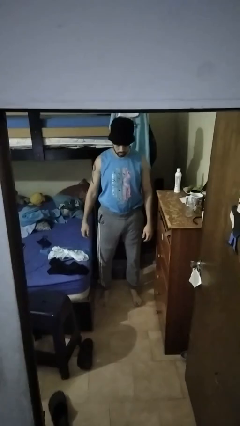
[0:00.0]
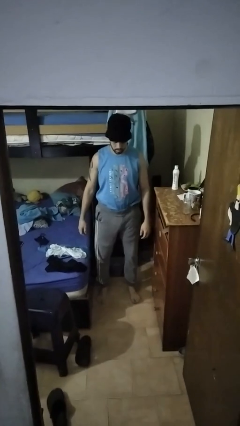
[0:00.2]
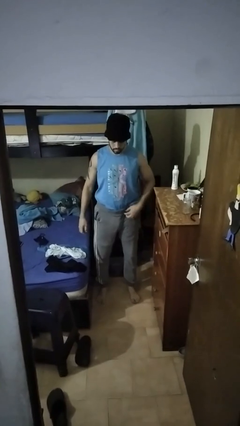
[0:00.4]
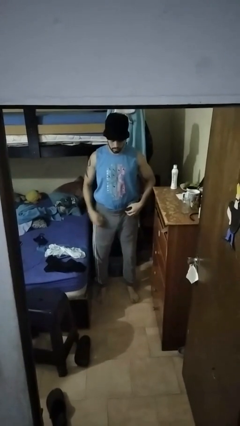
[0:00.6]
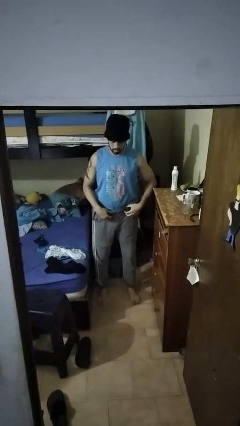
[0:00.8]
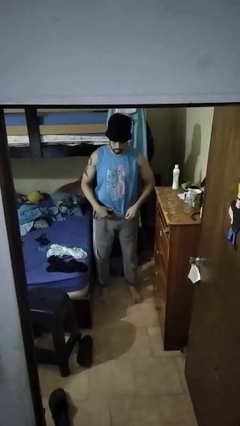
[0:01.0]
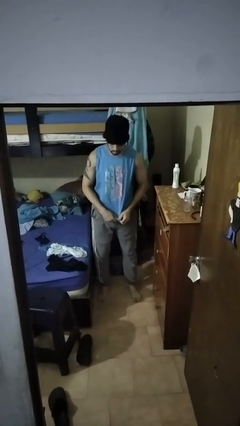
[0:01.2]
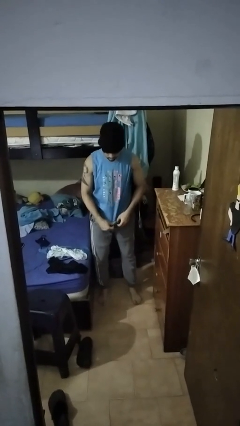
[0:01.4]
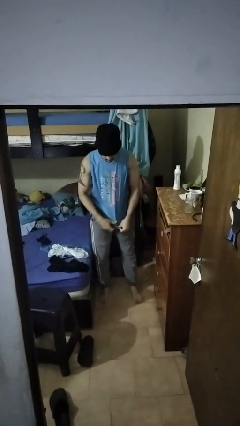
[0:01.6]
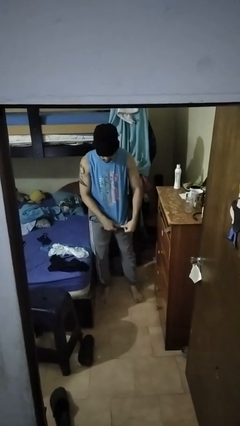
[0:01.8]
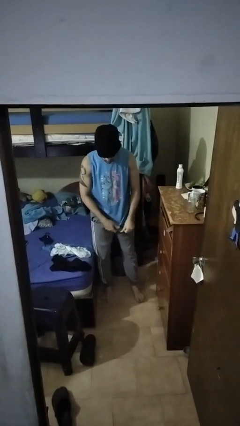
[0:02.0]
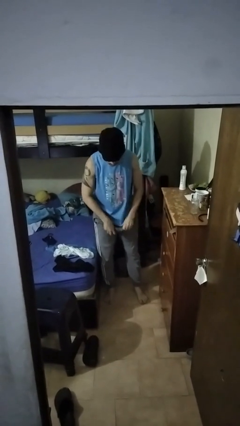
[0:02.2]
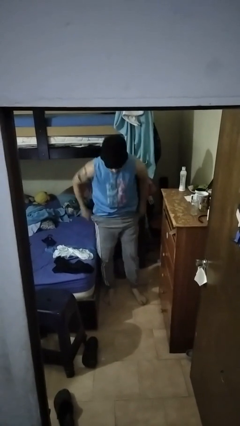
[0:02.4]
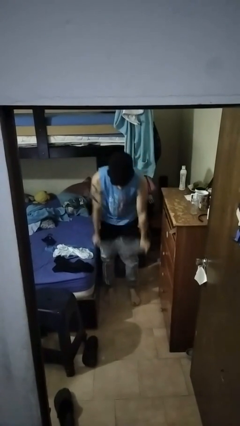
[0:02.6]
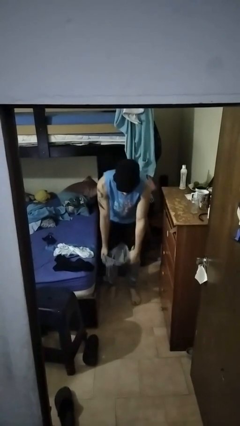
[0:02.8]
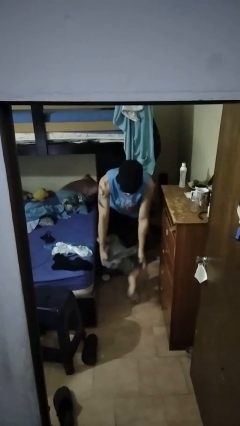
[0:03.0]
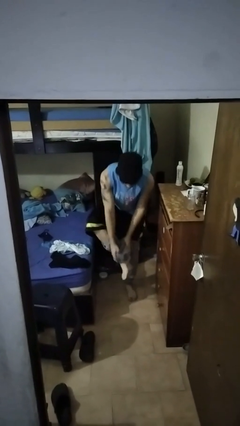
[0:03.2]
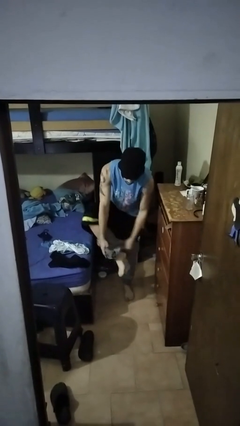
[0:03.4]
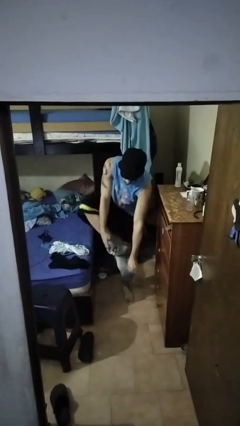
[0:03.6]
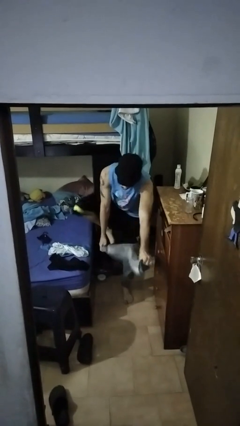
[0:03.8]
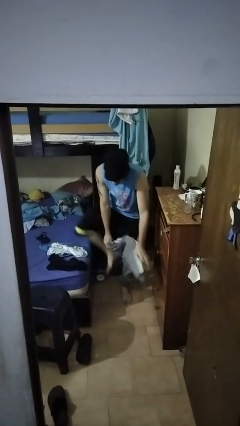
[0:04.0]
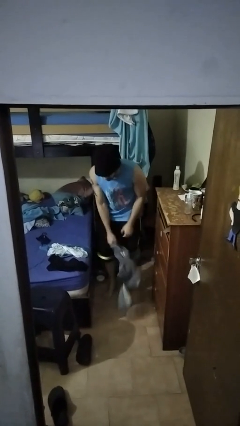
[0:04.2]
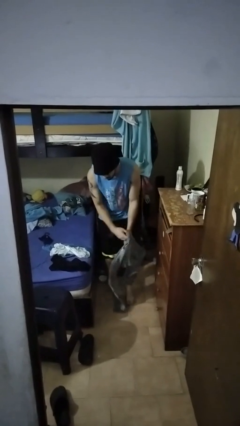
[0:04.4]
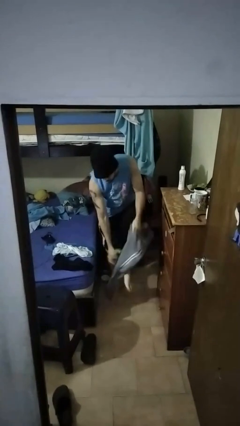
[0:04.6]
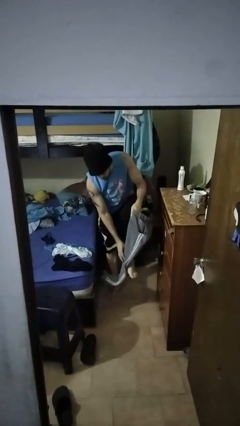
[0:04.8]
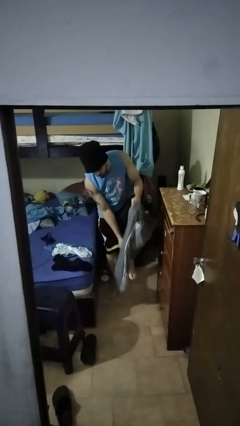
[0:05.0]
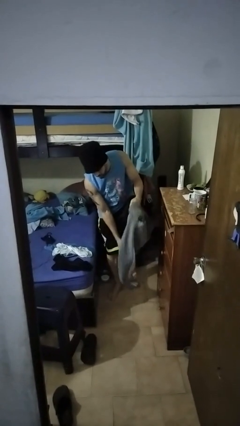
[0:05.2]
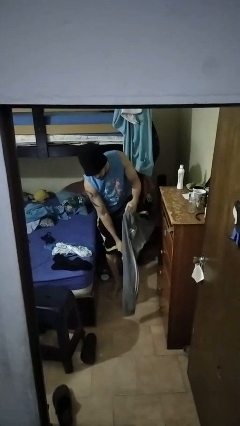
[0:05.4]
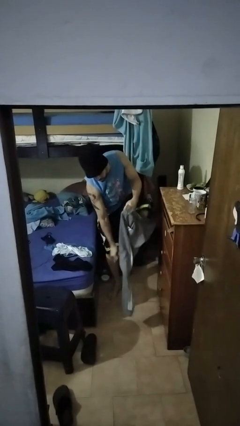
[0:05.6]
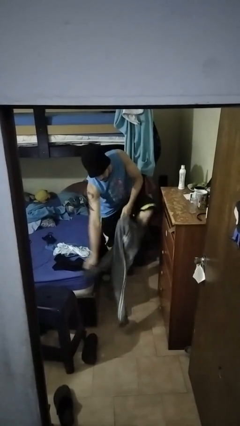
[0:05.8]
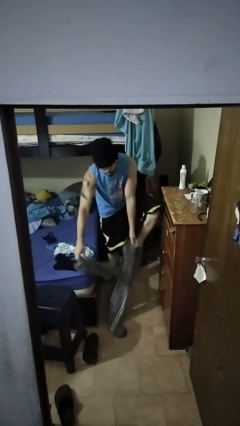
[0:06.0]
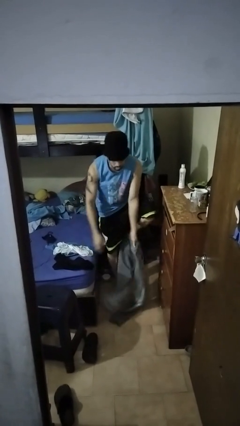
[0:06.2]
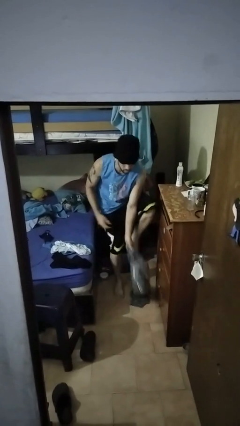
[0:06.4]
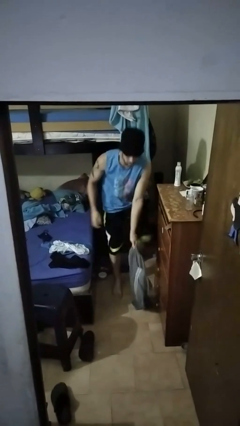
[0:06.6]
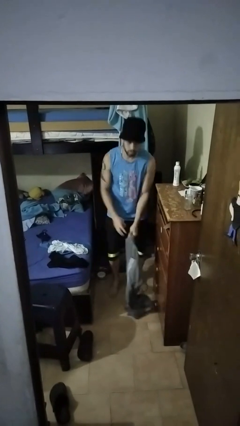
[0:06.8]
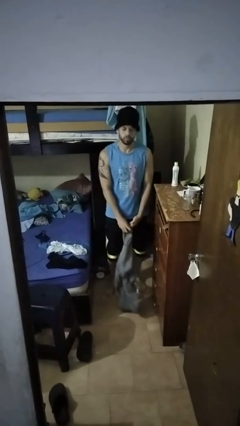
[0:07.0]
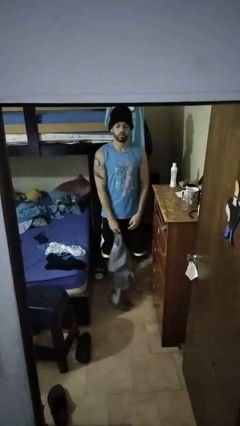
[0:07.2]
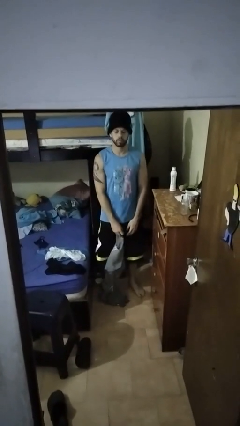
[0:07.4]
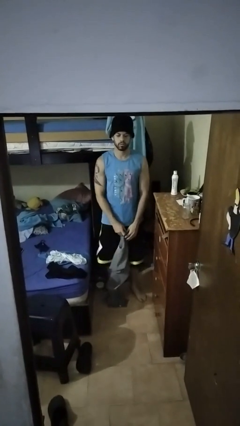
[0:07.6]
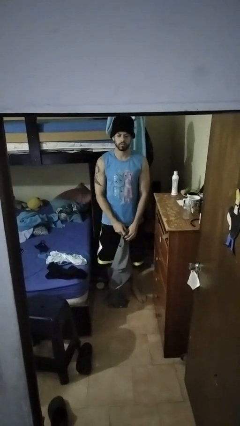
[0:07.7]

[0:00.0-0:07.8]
person takes off pants

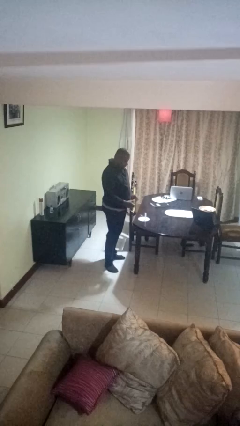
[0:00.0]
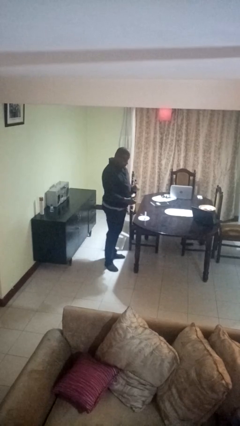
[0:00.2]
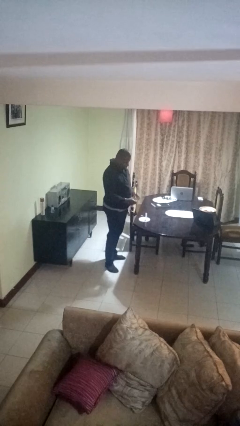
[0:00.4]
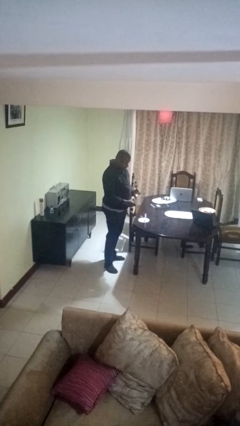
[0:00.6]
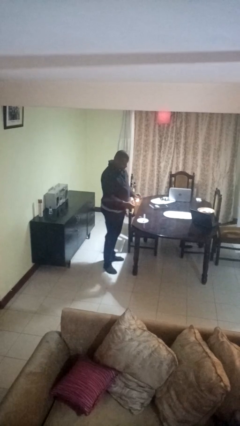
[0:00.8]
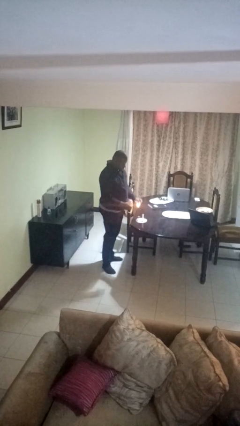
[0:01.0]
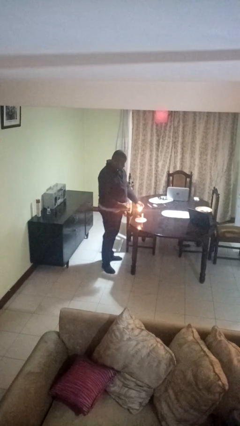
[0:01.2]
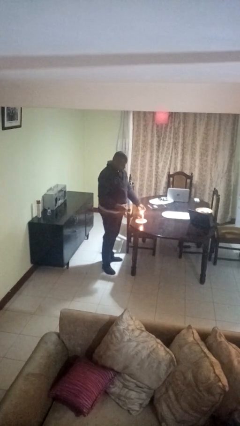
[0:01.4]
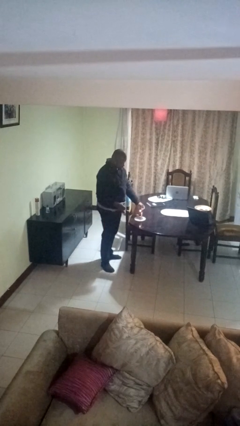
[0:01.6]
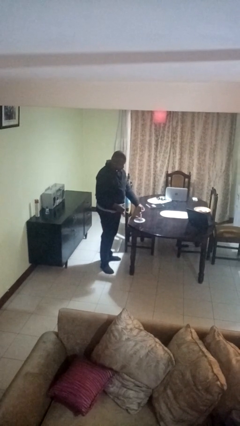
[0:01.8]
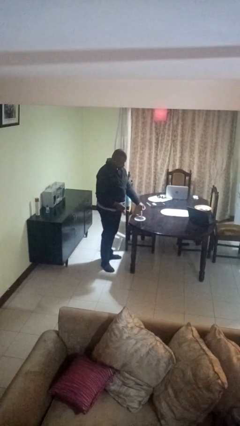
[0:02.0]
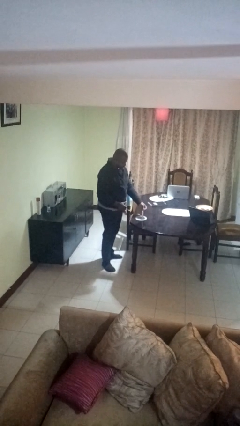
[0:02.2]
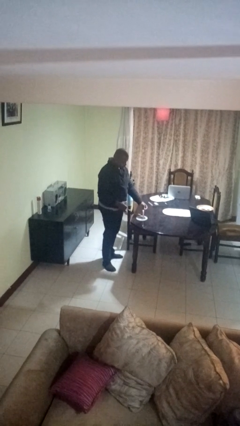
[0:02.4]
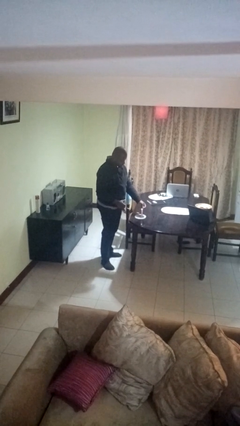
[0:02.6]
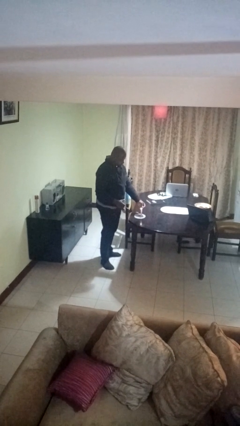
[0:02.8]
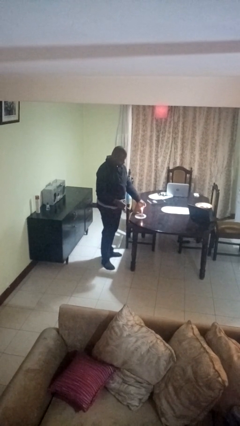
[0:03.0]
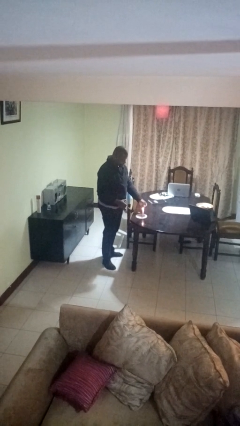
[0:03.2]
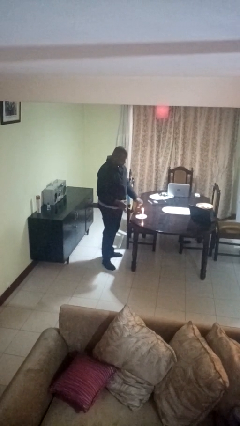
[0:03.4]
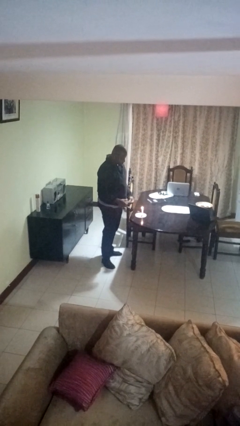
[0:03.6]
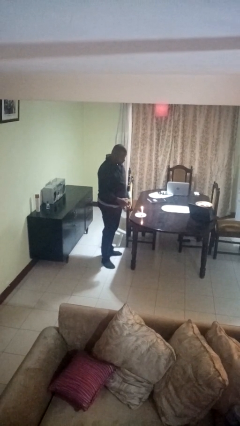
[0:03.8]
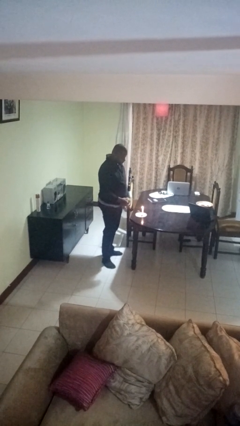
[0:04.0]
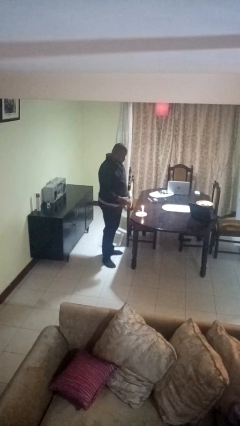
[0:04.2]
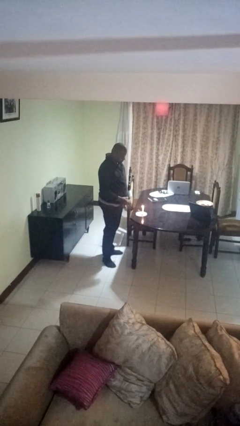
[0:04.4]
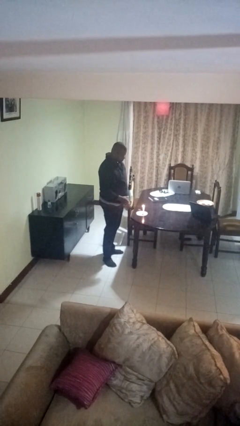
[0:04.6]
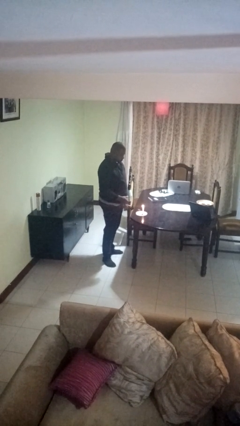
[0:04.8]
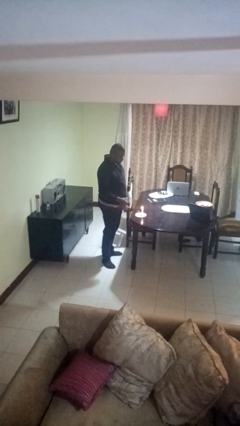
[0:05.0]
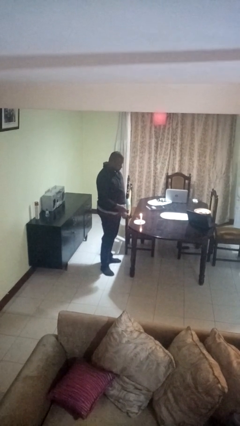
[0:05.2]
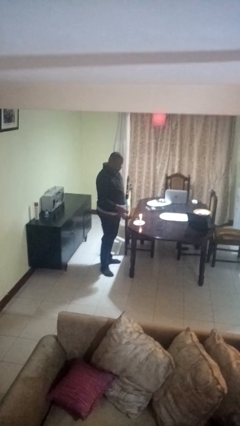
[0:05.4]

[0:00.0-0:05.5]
person lights candle

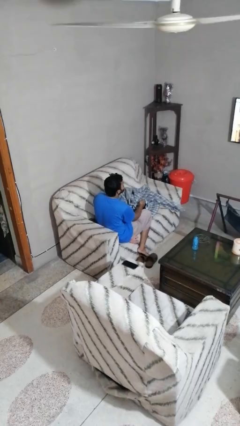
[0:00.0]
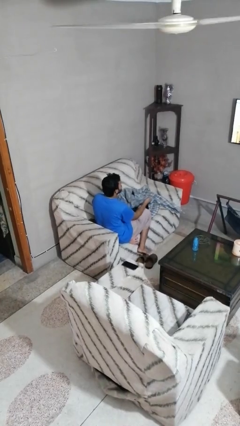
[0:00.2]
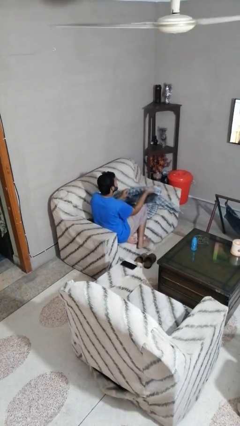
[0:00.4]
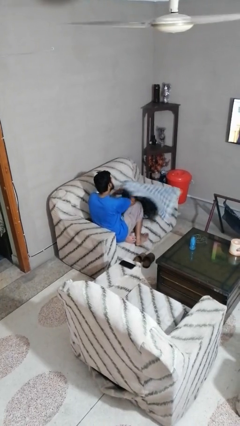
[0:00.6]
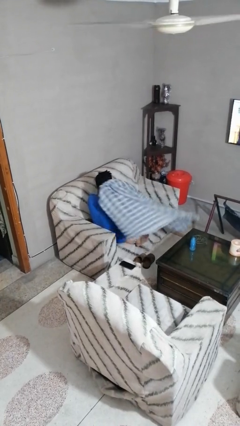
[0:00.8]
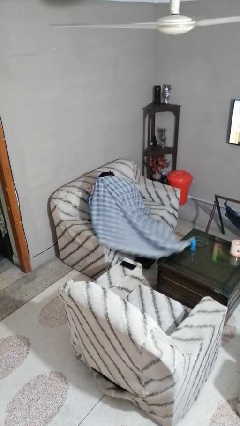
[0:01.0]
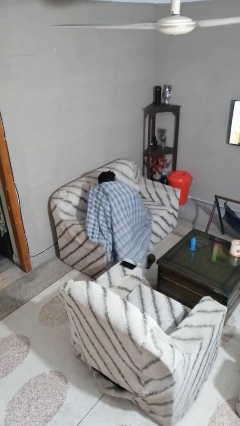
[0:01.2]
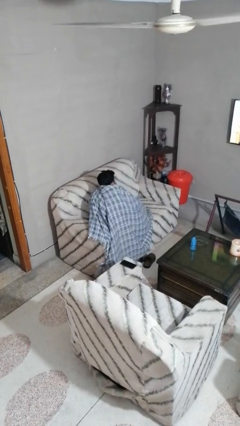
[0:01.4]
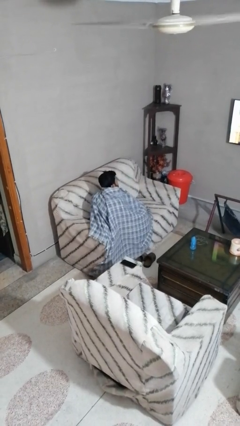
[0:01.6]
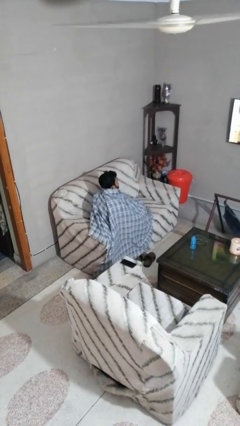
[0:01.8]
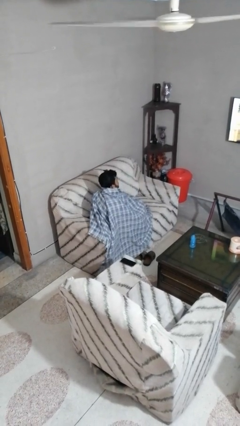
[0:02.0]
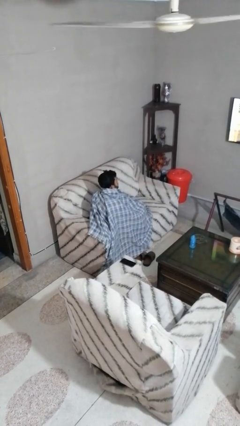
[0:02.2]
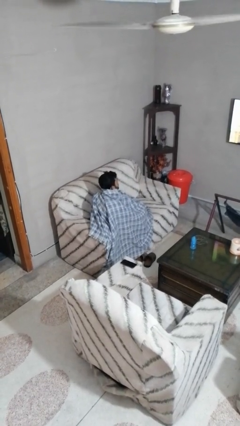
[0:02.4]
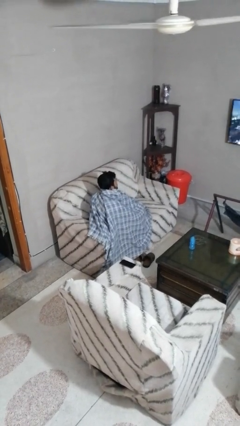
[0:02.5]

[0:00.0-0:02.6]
person covers with blanket

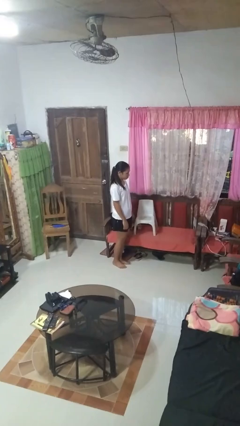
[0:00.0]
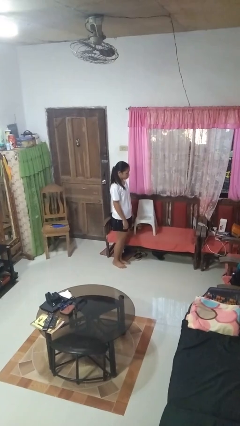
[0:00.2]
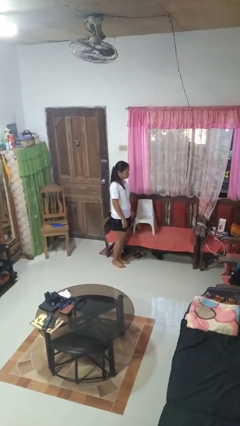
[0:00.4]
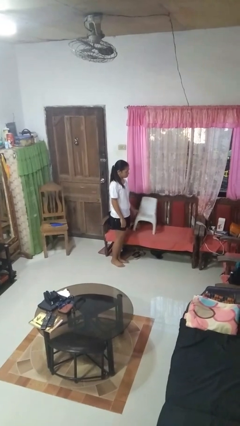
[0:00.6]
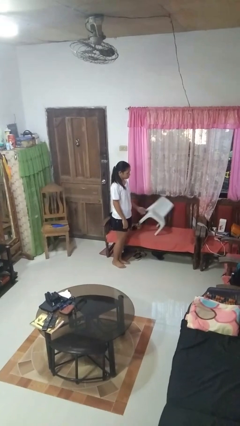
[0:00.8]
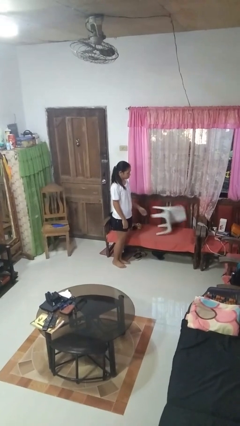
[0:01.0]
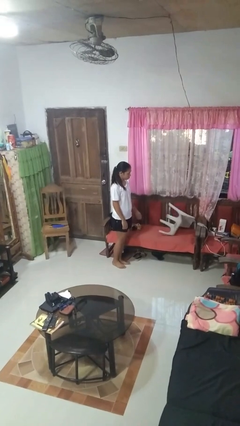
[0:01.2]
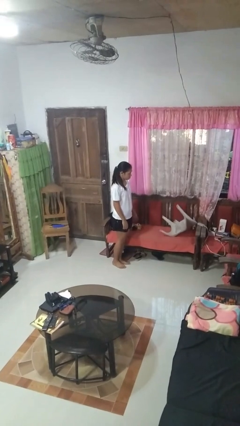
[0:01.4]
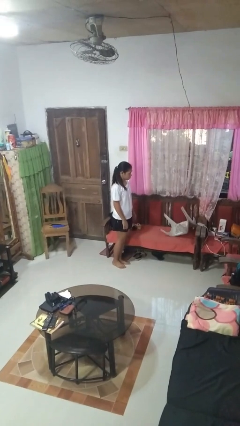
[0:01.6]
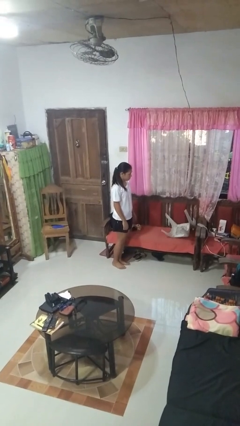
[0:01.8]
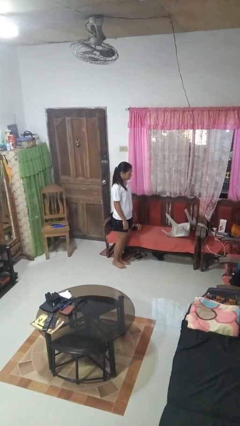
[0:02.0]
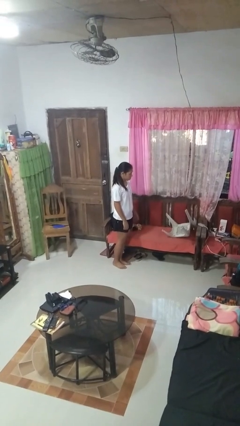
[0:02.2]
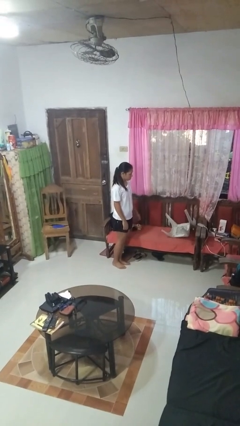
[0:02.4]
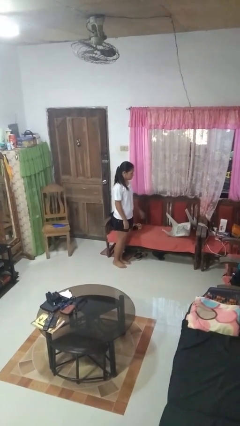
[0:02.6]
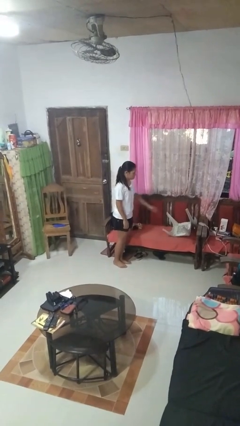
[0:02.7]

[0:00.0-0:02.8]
person knocks over furniture
